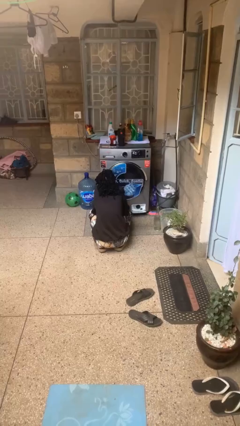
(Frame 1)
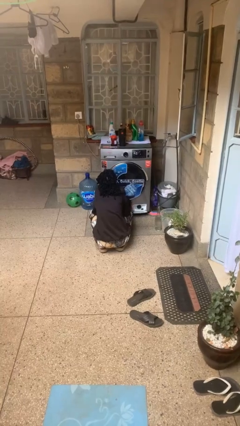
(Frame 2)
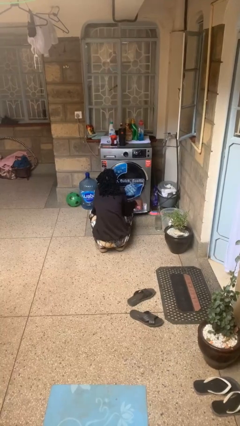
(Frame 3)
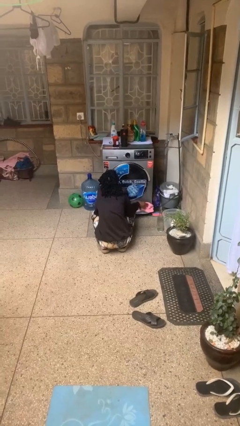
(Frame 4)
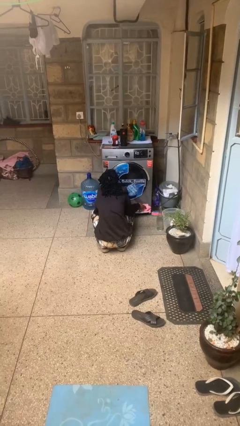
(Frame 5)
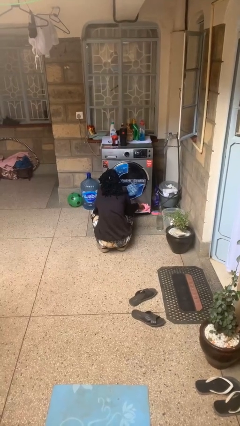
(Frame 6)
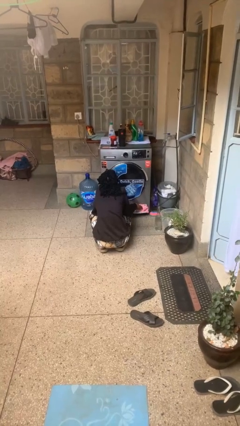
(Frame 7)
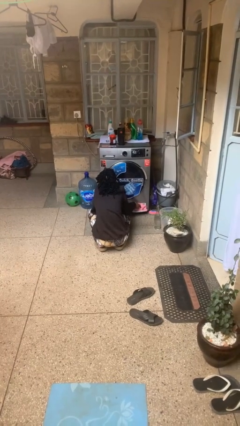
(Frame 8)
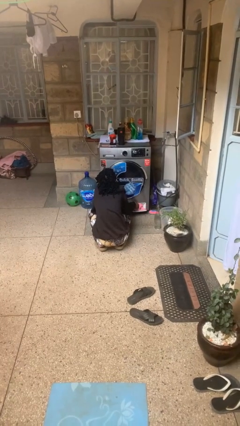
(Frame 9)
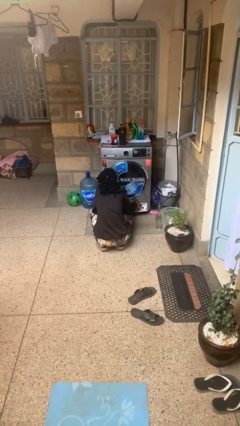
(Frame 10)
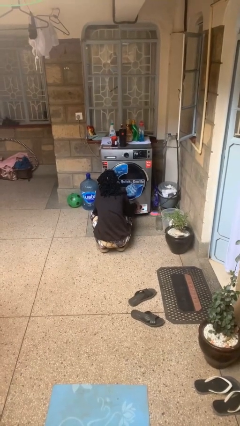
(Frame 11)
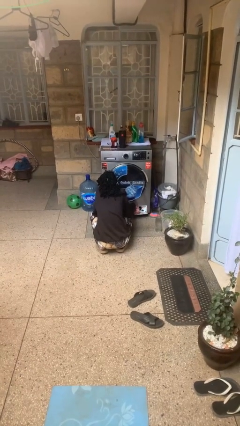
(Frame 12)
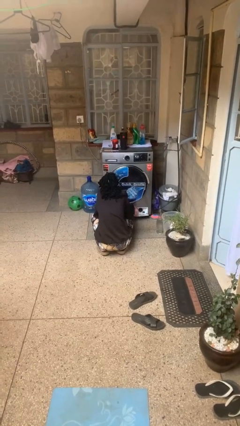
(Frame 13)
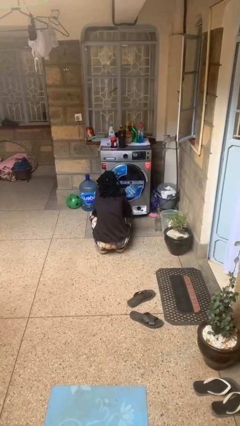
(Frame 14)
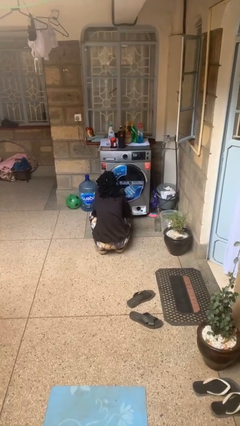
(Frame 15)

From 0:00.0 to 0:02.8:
person cleans dryer lint trap

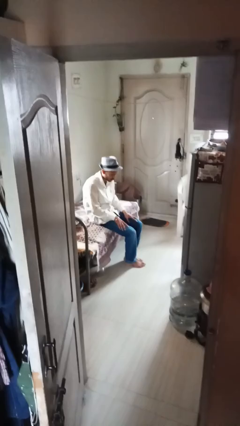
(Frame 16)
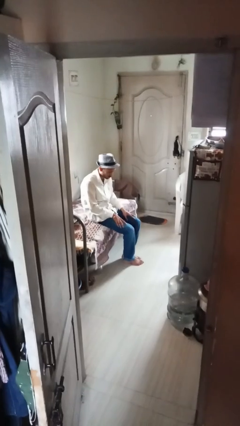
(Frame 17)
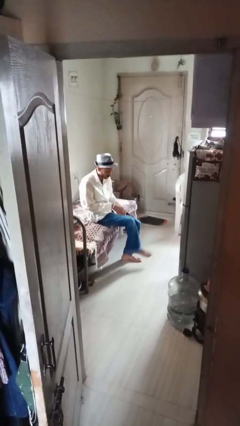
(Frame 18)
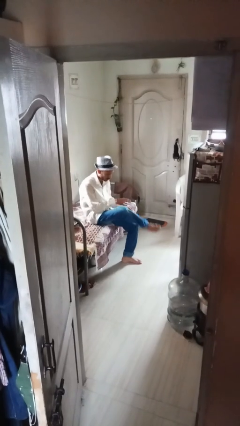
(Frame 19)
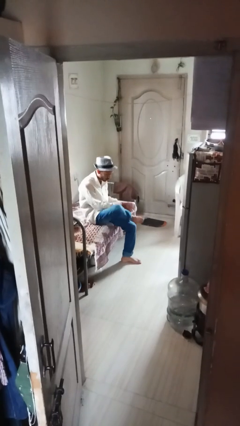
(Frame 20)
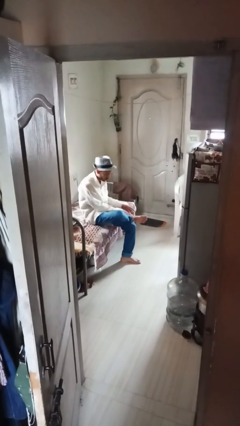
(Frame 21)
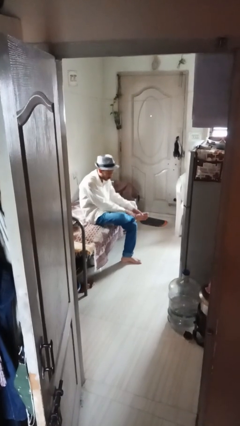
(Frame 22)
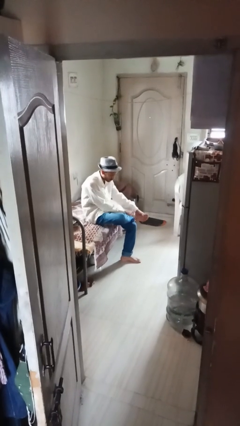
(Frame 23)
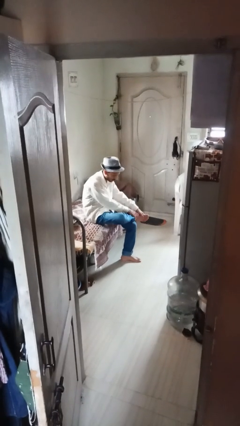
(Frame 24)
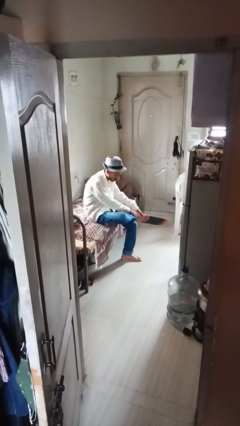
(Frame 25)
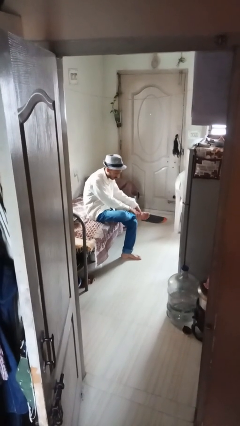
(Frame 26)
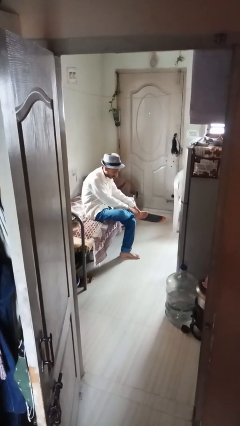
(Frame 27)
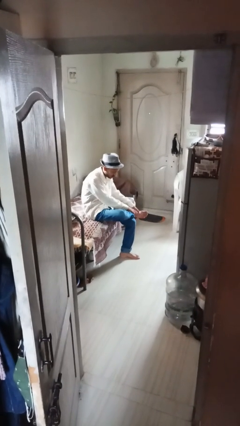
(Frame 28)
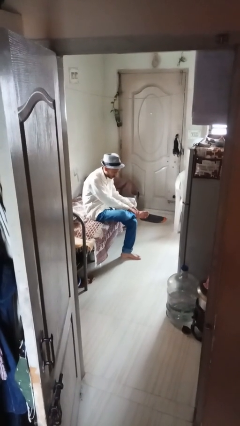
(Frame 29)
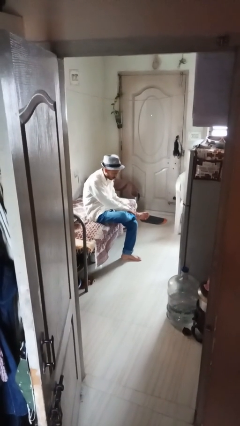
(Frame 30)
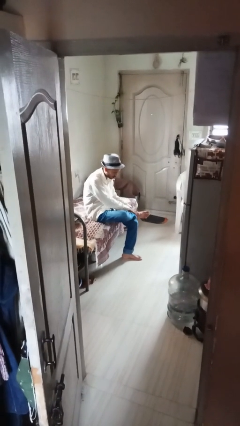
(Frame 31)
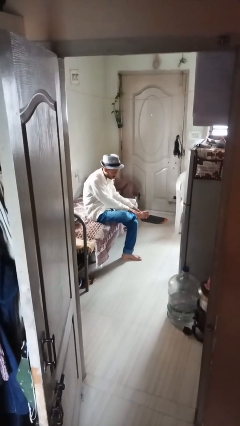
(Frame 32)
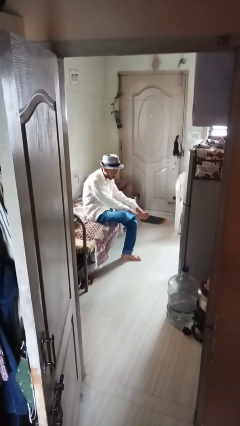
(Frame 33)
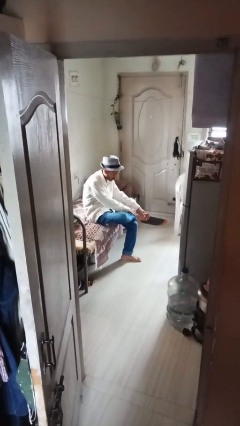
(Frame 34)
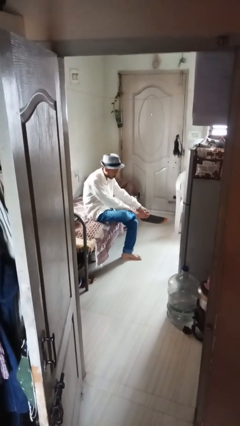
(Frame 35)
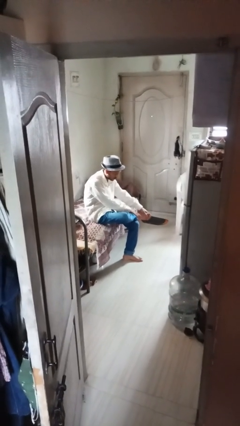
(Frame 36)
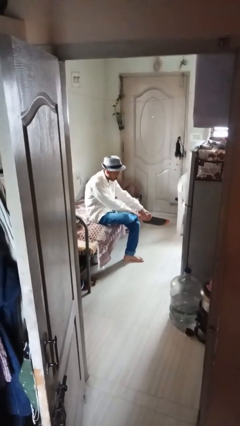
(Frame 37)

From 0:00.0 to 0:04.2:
person rubs foot

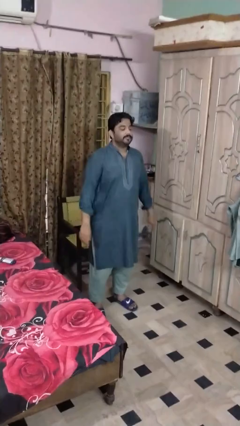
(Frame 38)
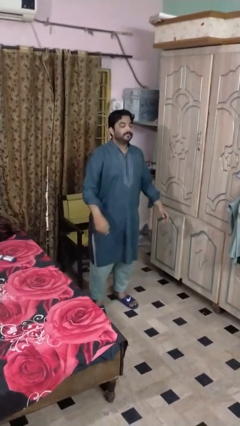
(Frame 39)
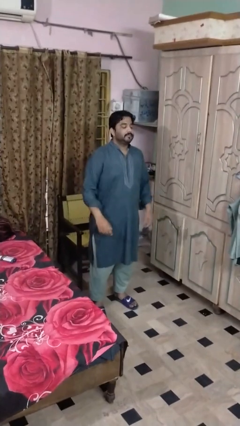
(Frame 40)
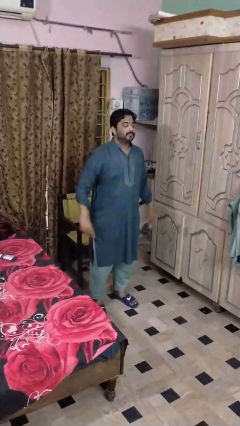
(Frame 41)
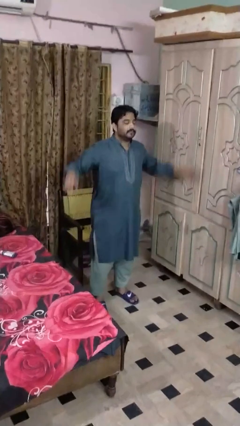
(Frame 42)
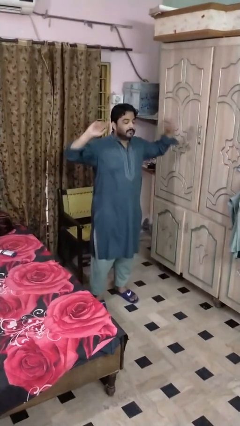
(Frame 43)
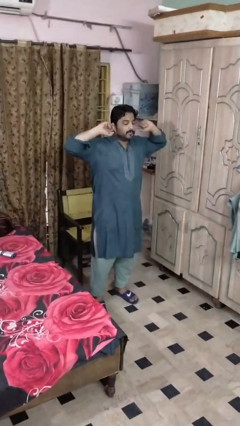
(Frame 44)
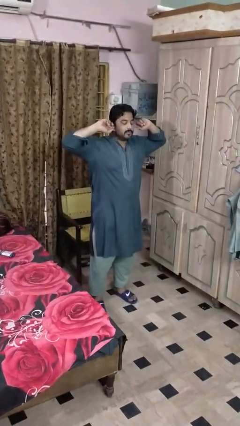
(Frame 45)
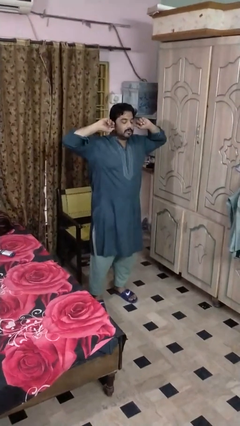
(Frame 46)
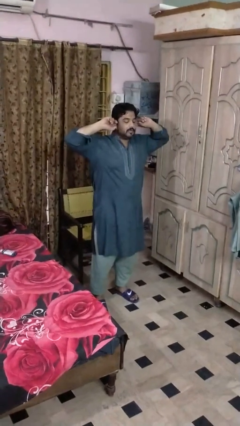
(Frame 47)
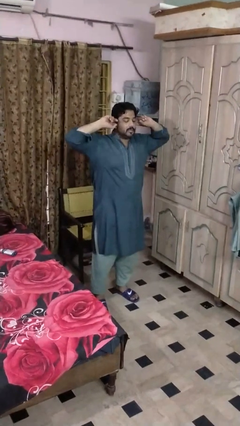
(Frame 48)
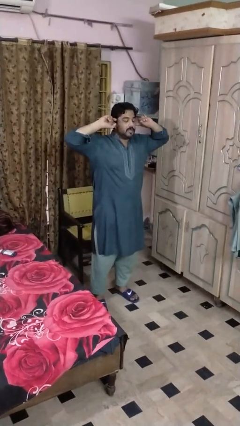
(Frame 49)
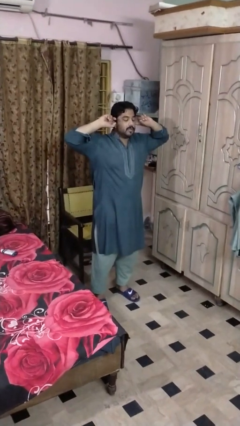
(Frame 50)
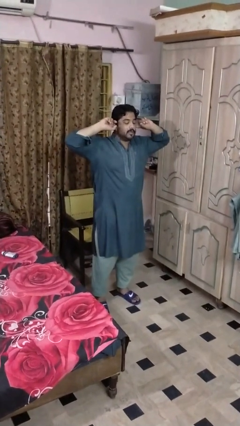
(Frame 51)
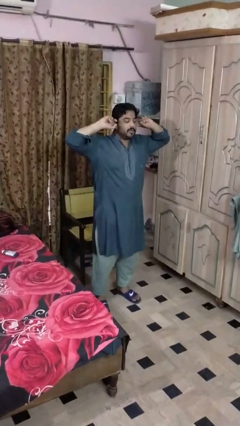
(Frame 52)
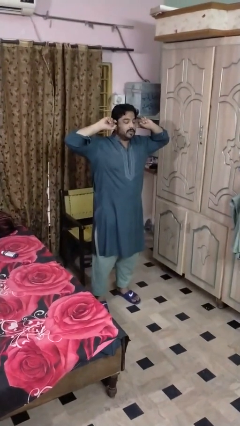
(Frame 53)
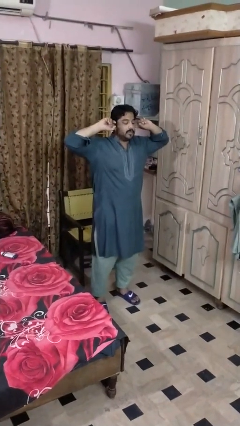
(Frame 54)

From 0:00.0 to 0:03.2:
person puts fingers in ear

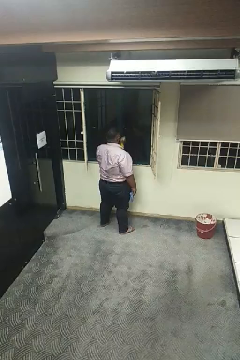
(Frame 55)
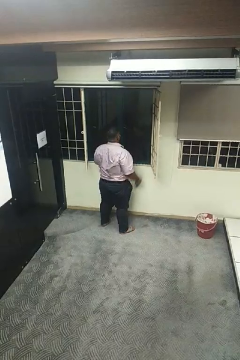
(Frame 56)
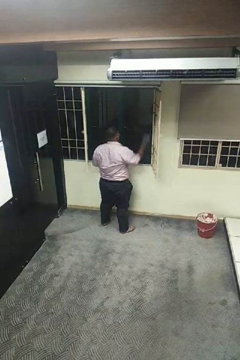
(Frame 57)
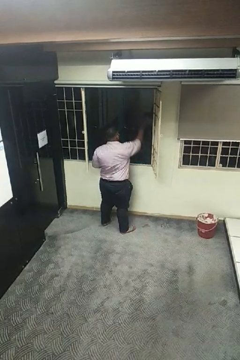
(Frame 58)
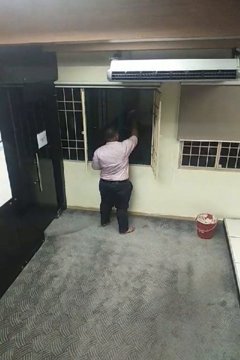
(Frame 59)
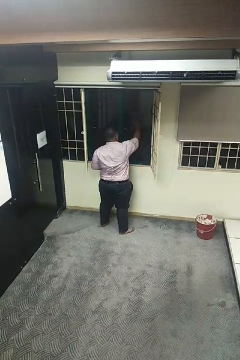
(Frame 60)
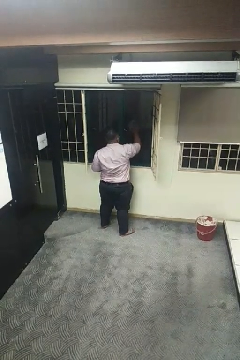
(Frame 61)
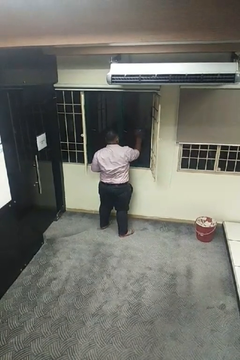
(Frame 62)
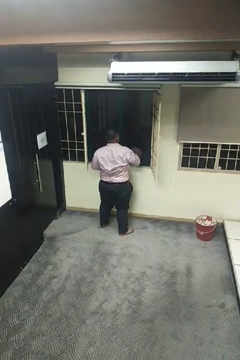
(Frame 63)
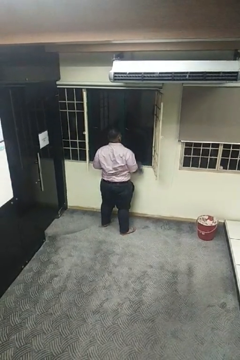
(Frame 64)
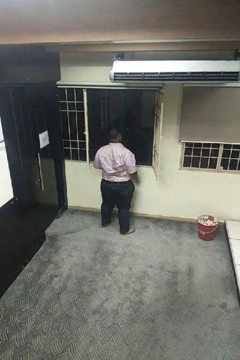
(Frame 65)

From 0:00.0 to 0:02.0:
person washes window

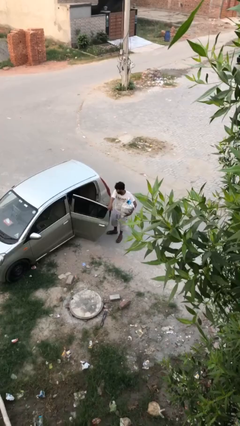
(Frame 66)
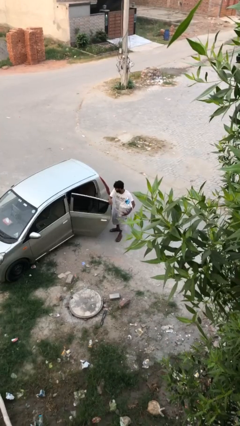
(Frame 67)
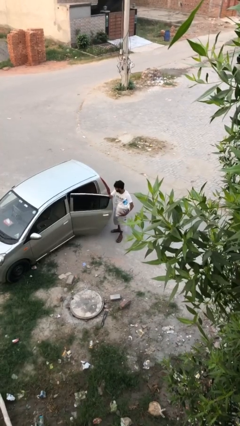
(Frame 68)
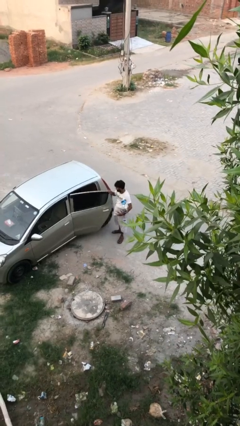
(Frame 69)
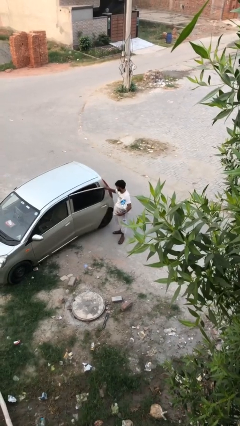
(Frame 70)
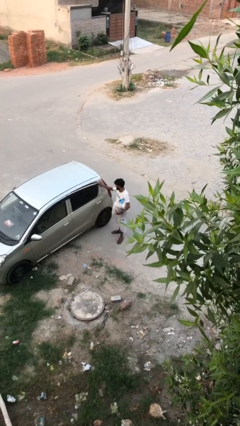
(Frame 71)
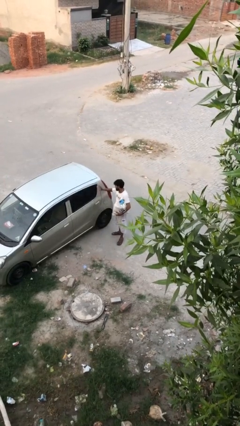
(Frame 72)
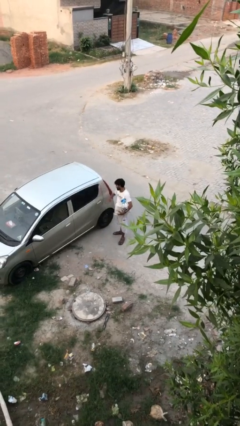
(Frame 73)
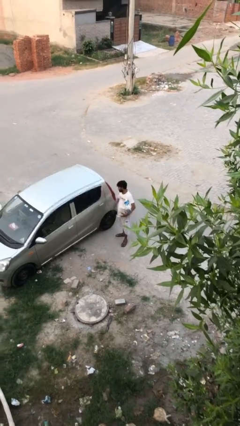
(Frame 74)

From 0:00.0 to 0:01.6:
person closes car door

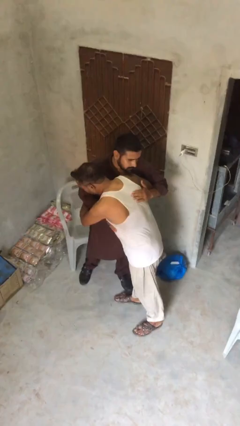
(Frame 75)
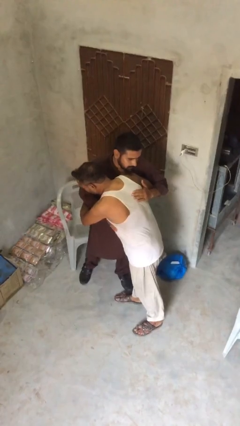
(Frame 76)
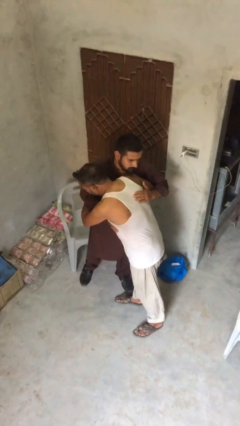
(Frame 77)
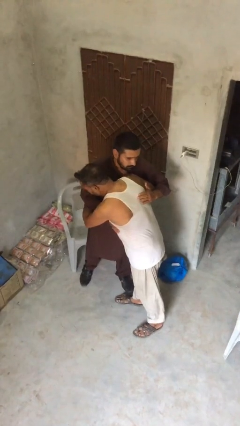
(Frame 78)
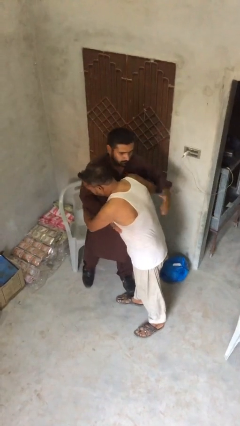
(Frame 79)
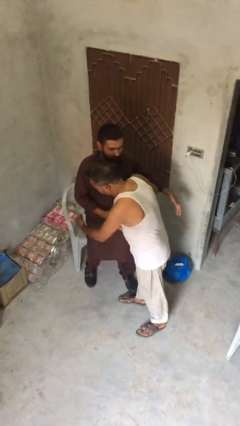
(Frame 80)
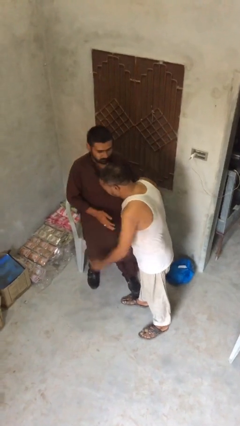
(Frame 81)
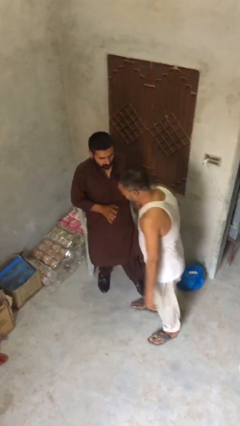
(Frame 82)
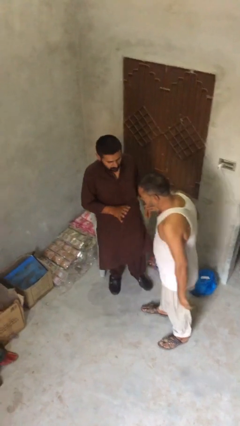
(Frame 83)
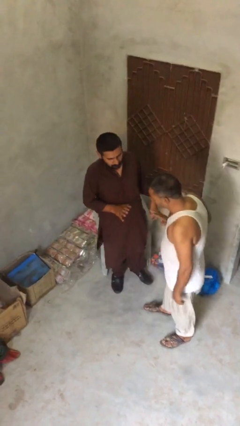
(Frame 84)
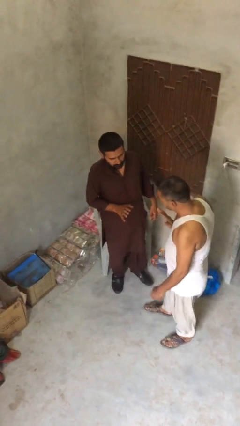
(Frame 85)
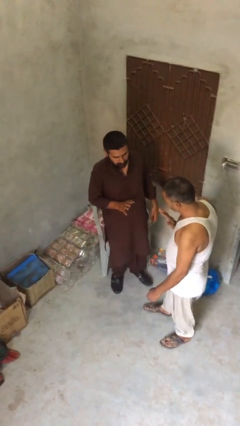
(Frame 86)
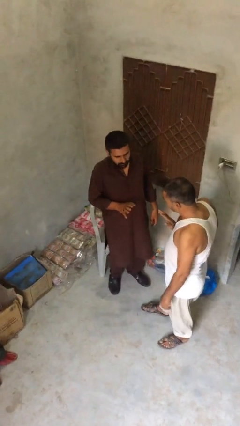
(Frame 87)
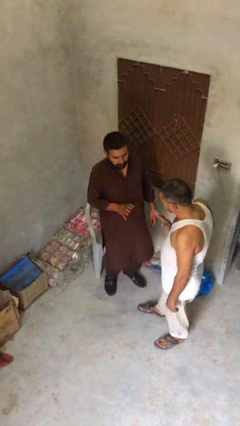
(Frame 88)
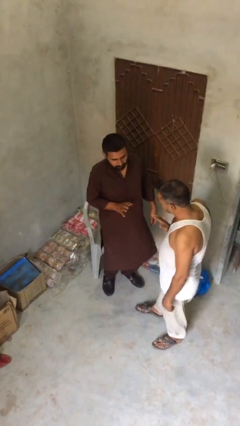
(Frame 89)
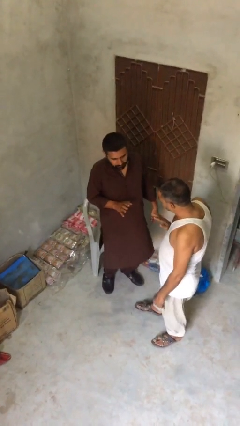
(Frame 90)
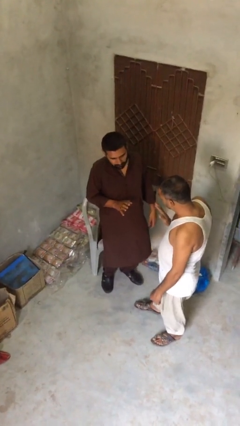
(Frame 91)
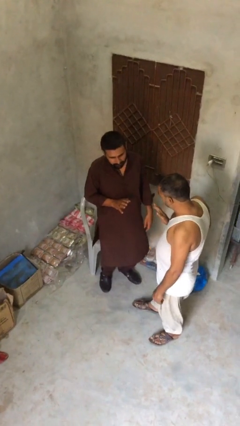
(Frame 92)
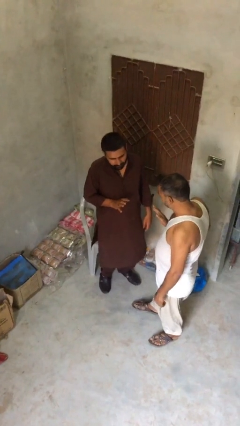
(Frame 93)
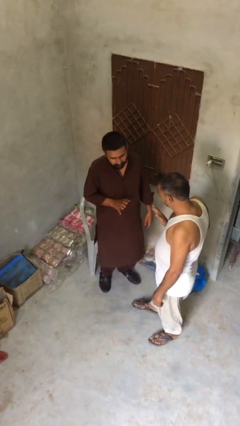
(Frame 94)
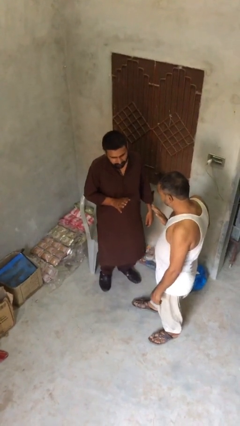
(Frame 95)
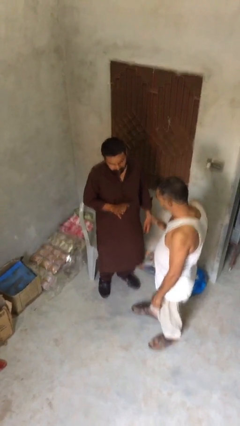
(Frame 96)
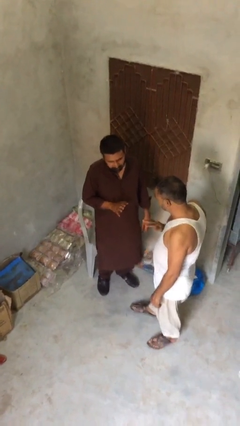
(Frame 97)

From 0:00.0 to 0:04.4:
person talks to person
